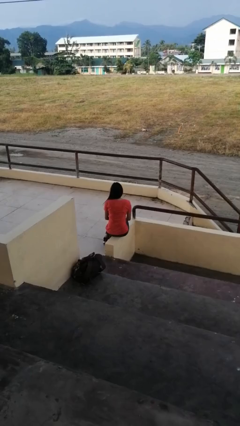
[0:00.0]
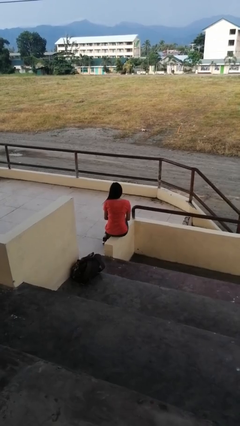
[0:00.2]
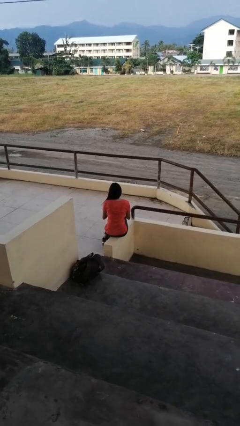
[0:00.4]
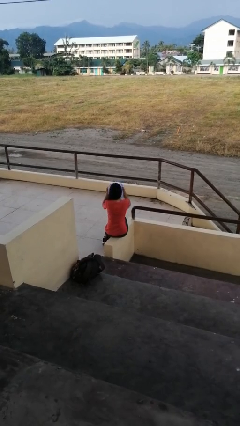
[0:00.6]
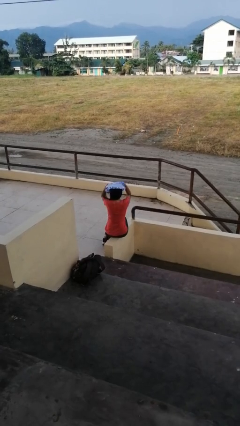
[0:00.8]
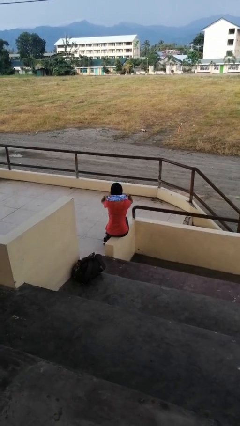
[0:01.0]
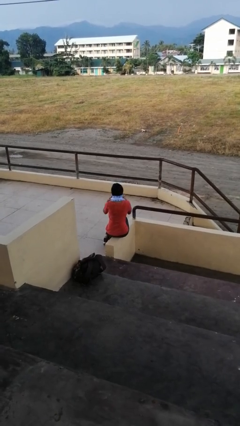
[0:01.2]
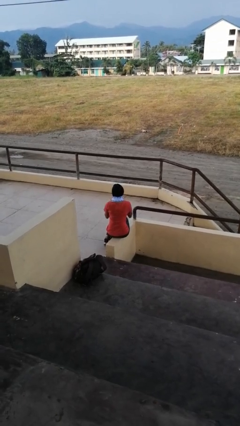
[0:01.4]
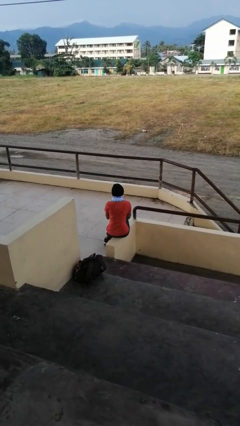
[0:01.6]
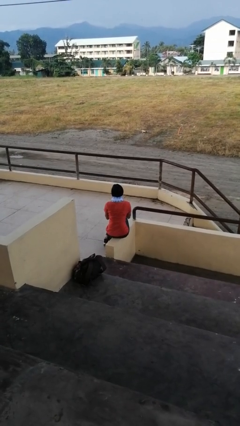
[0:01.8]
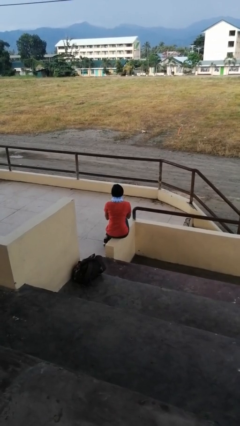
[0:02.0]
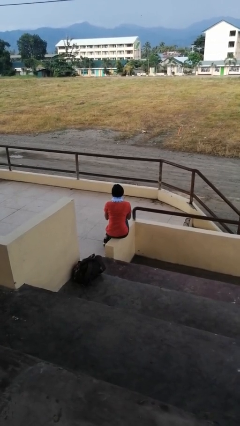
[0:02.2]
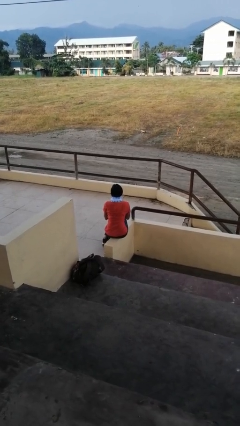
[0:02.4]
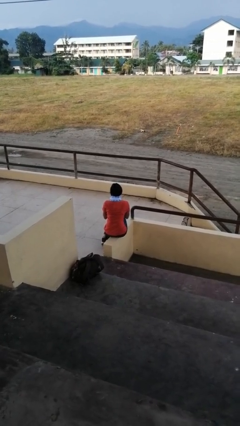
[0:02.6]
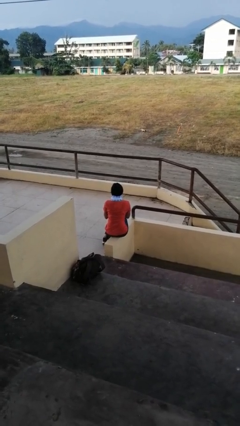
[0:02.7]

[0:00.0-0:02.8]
person puts on scarf

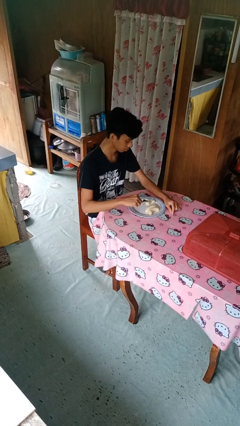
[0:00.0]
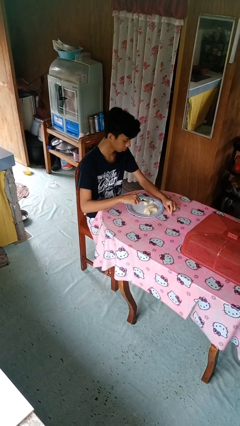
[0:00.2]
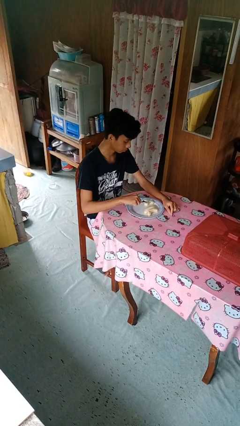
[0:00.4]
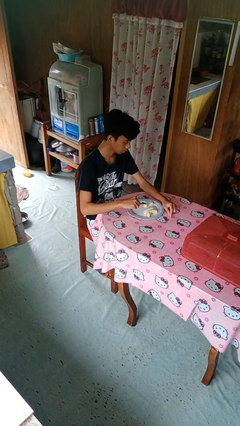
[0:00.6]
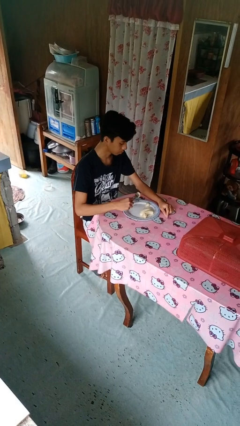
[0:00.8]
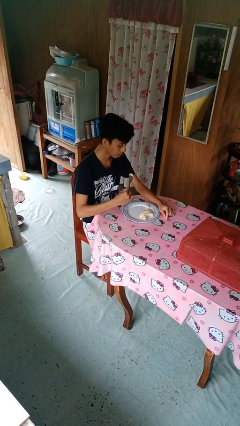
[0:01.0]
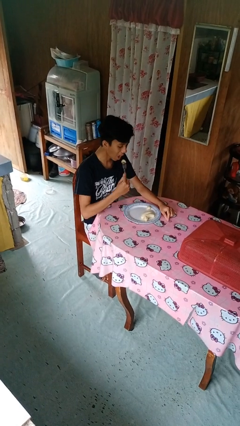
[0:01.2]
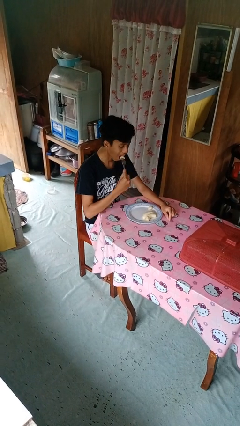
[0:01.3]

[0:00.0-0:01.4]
person eats with utensil

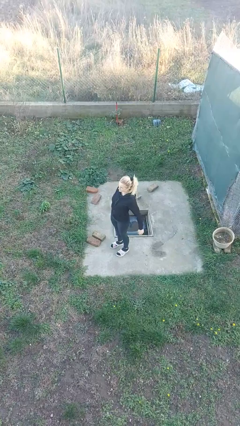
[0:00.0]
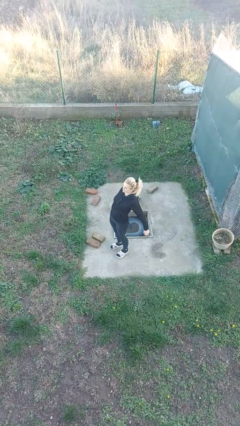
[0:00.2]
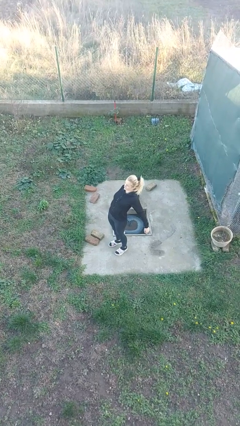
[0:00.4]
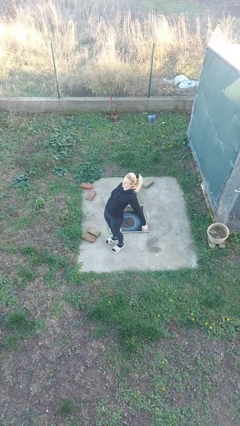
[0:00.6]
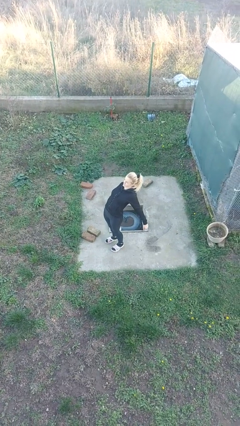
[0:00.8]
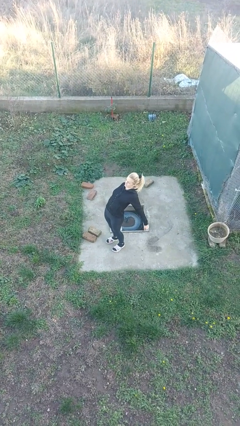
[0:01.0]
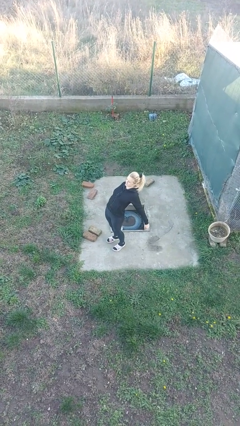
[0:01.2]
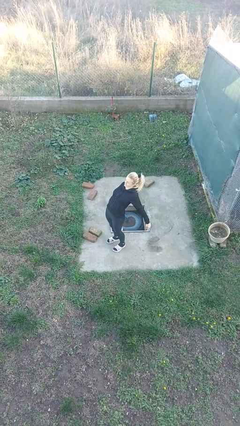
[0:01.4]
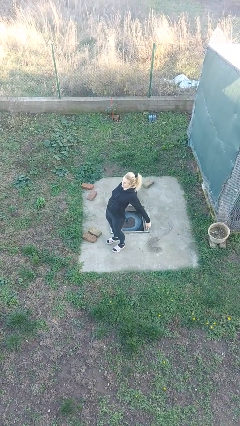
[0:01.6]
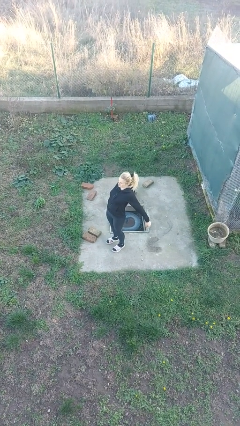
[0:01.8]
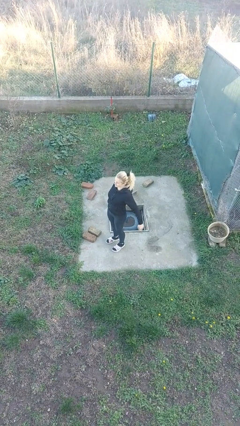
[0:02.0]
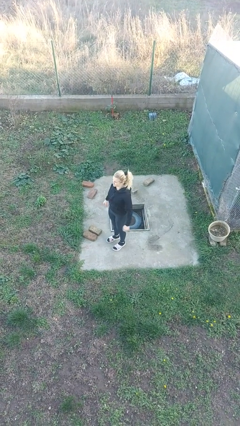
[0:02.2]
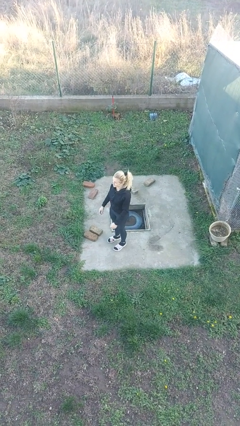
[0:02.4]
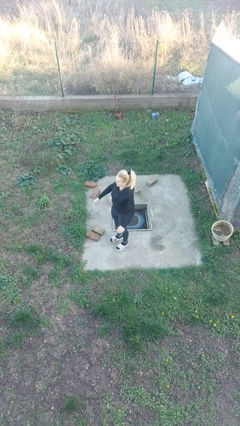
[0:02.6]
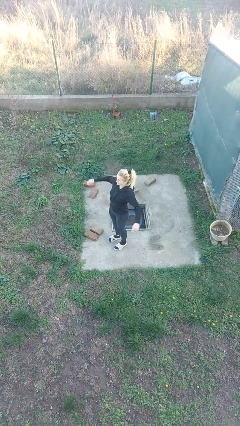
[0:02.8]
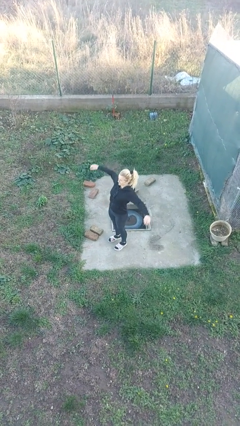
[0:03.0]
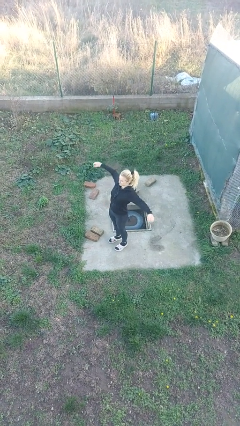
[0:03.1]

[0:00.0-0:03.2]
person stretches back

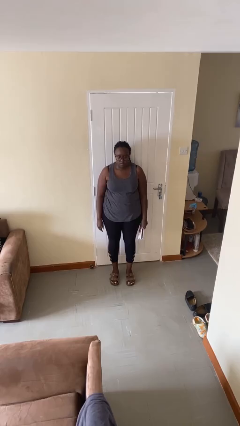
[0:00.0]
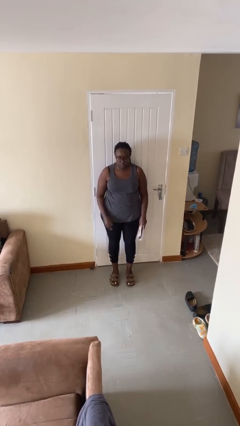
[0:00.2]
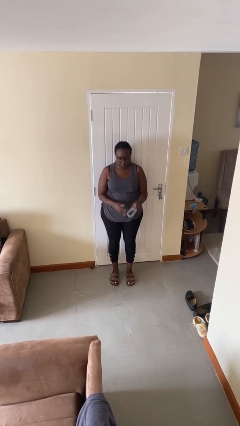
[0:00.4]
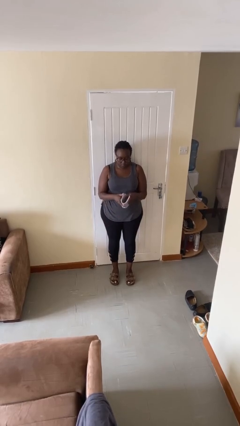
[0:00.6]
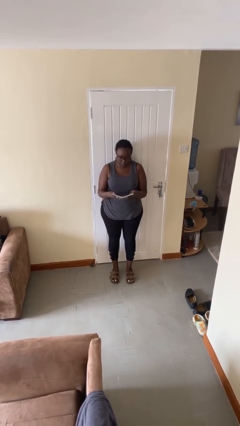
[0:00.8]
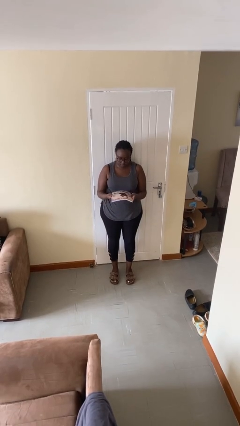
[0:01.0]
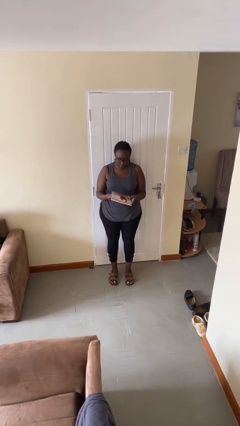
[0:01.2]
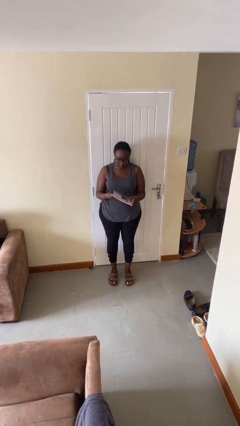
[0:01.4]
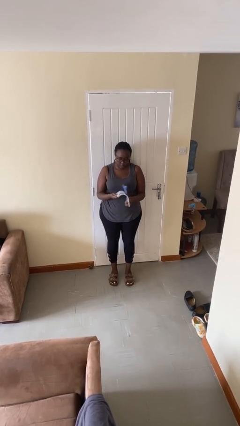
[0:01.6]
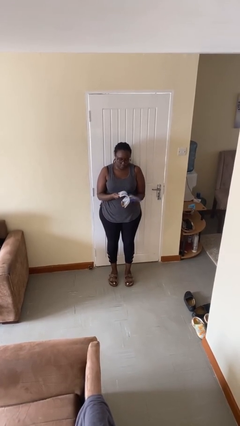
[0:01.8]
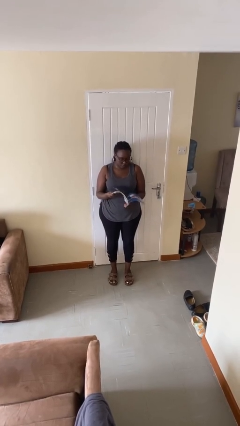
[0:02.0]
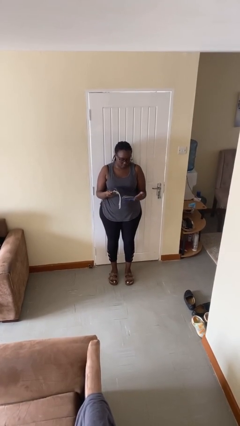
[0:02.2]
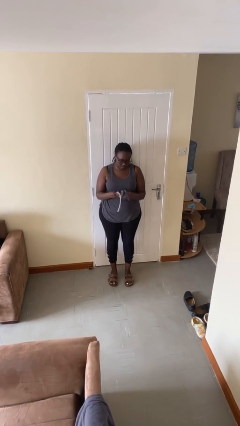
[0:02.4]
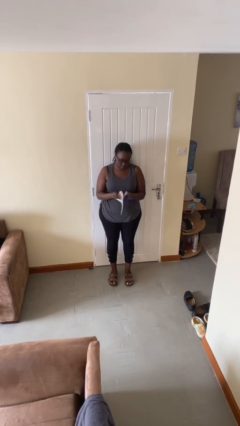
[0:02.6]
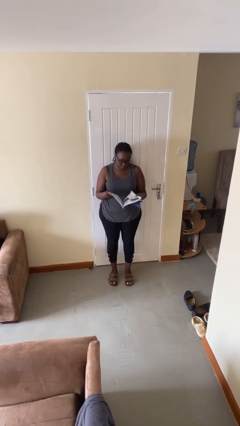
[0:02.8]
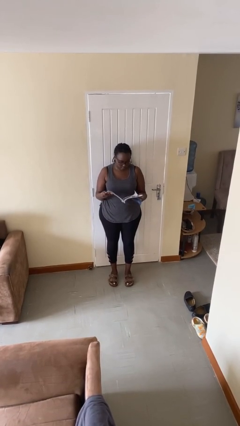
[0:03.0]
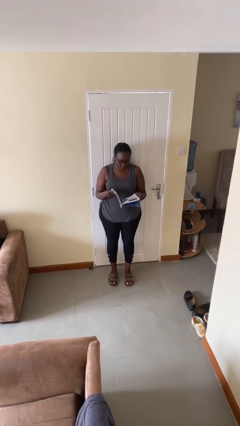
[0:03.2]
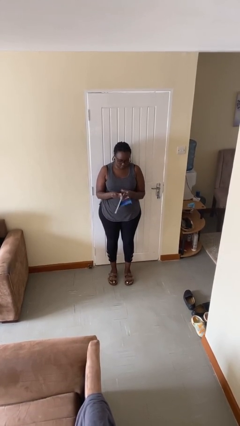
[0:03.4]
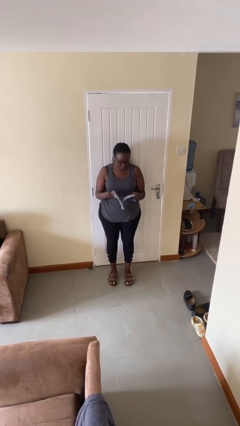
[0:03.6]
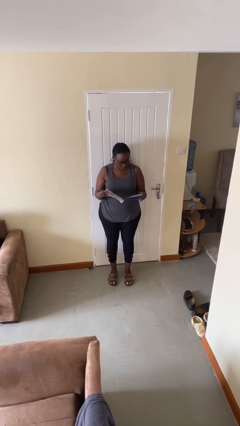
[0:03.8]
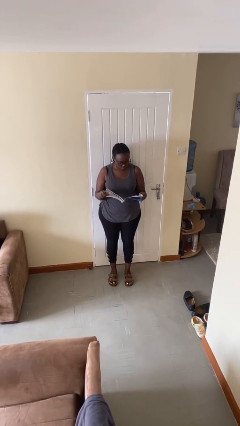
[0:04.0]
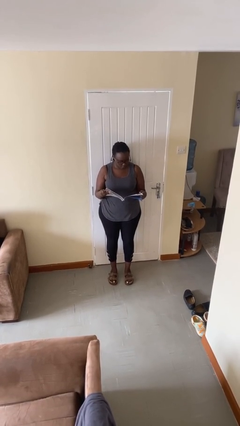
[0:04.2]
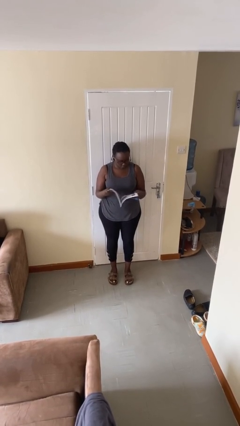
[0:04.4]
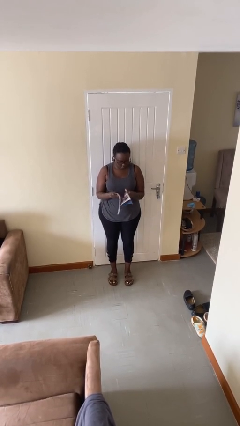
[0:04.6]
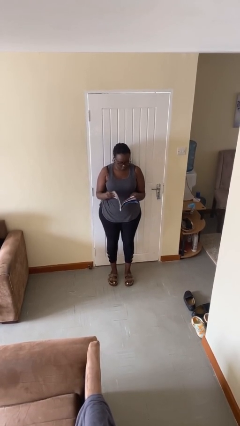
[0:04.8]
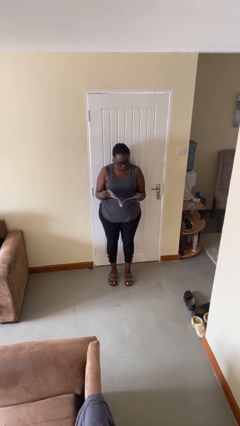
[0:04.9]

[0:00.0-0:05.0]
person reads magazine

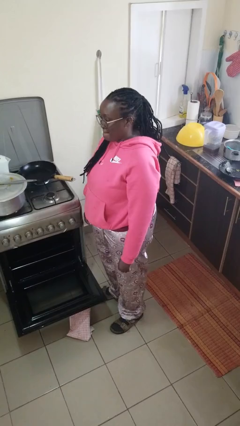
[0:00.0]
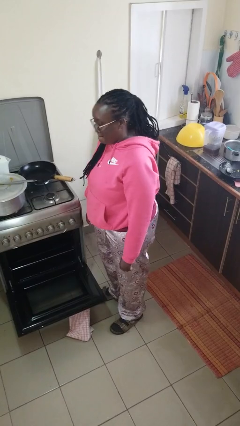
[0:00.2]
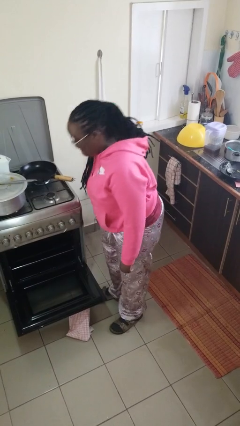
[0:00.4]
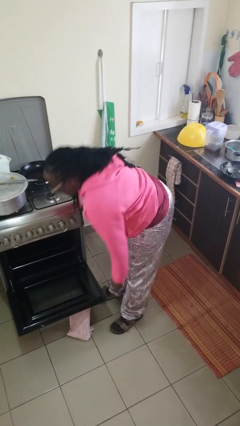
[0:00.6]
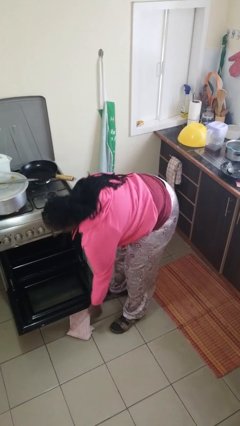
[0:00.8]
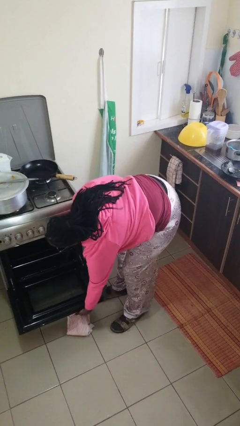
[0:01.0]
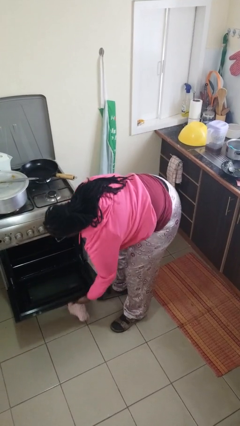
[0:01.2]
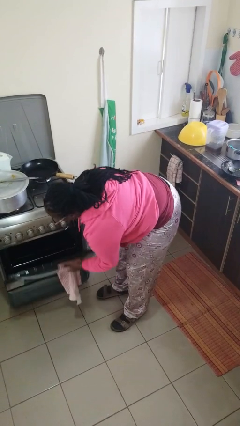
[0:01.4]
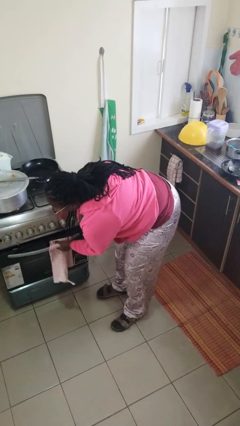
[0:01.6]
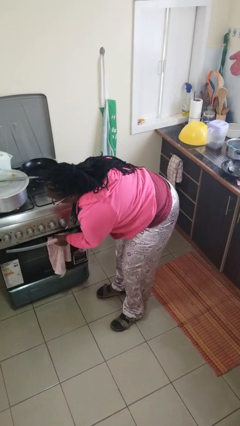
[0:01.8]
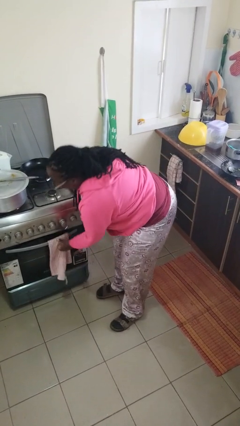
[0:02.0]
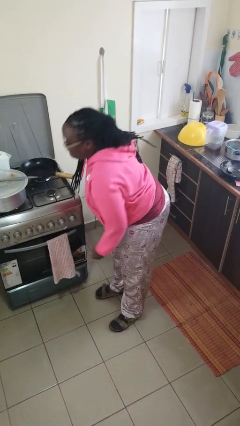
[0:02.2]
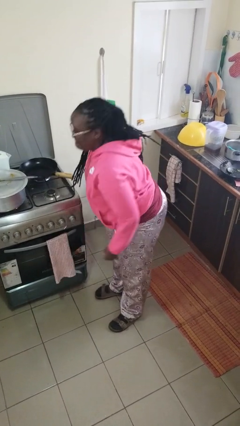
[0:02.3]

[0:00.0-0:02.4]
person closes oven door

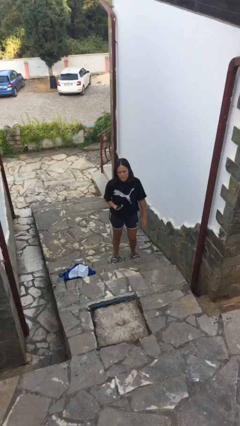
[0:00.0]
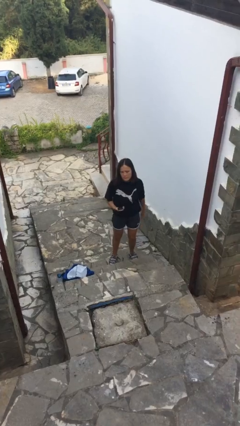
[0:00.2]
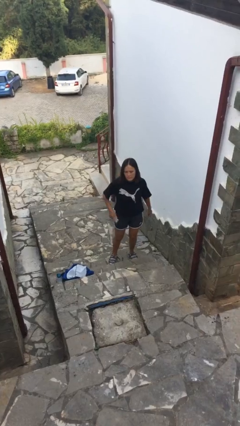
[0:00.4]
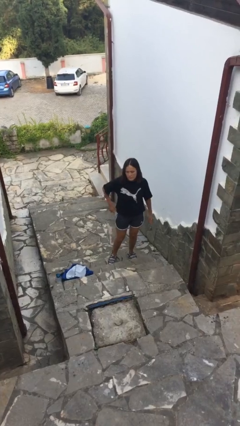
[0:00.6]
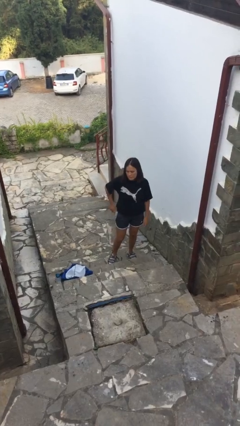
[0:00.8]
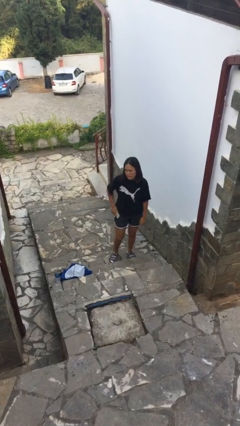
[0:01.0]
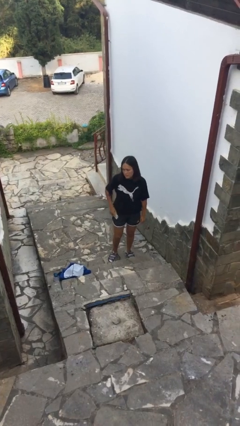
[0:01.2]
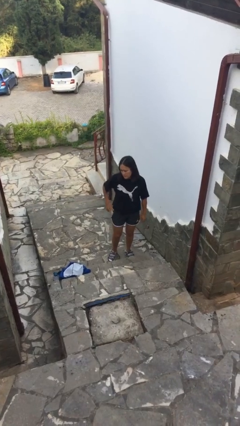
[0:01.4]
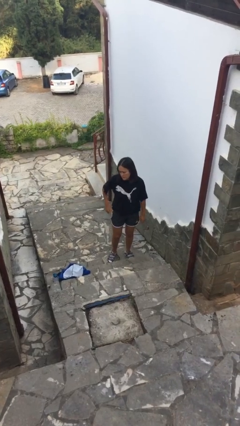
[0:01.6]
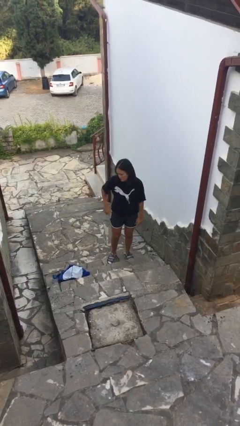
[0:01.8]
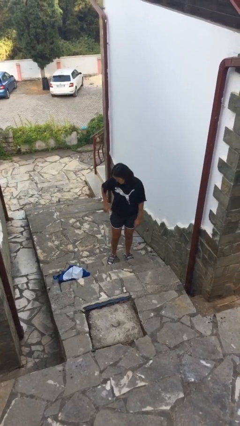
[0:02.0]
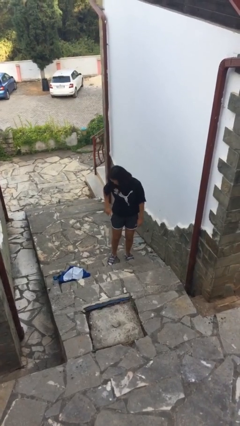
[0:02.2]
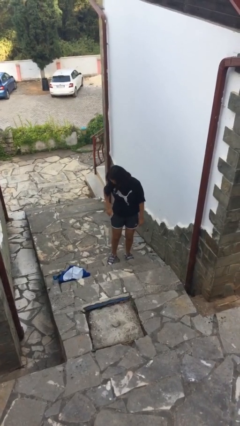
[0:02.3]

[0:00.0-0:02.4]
person puts phone into pocket
